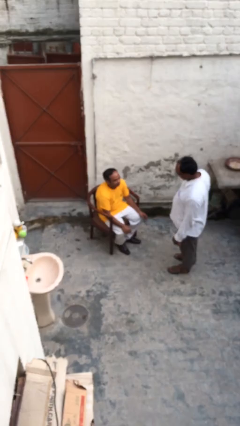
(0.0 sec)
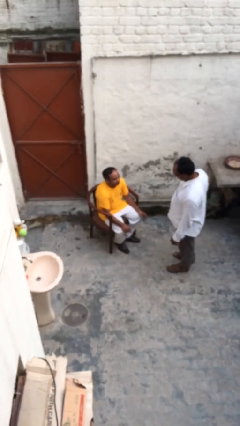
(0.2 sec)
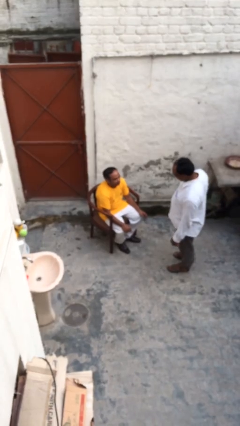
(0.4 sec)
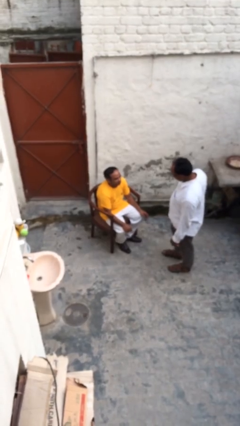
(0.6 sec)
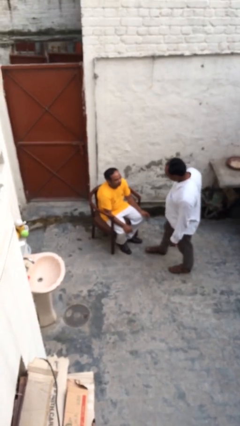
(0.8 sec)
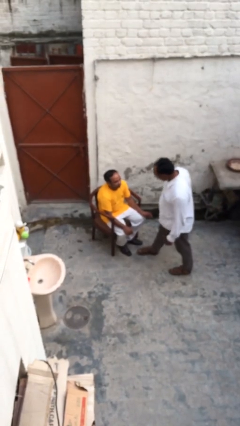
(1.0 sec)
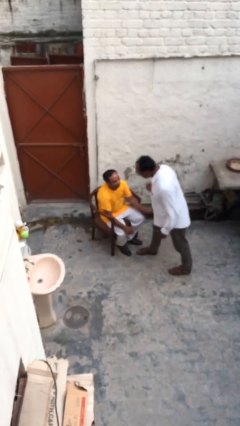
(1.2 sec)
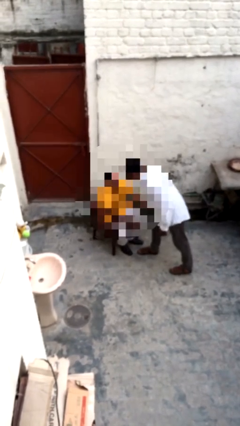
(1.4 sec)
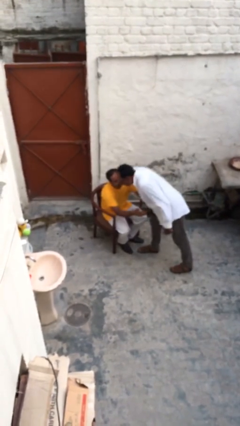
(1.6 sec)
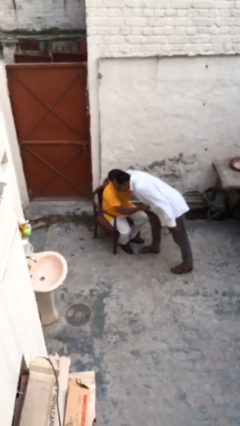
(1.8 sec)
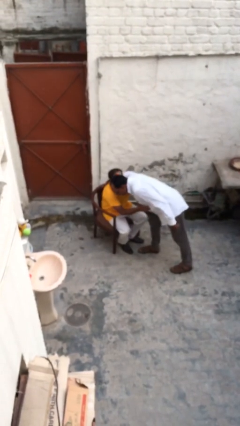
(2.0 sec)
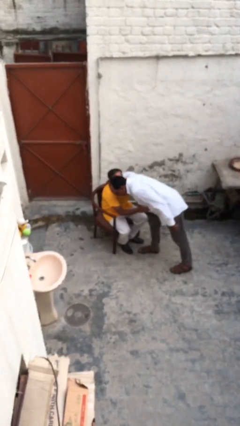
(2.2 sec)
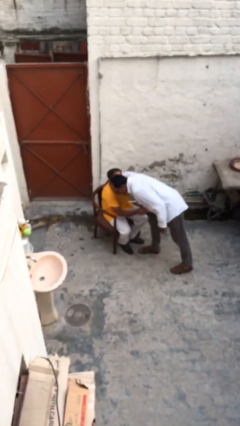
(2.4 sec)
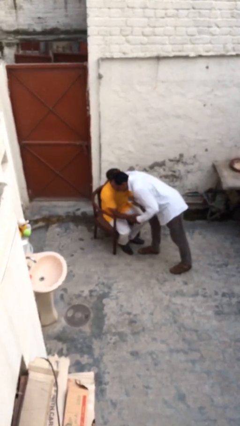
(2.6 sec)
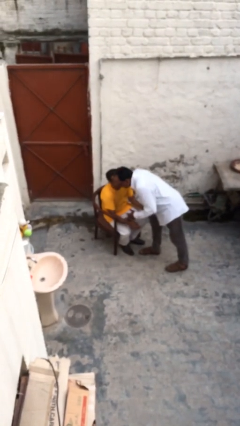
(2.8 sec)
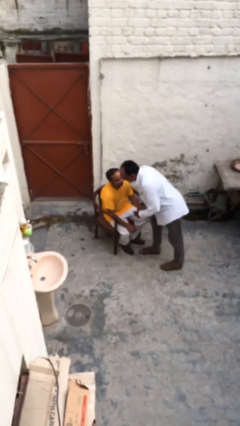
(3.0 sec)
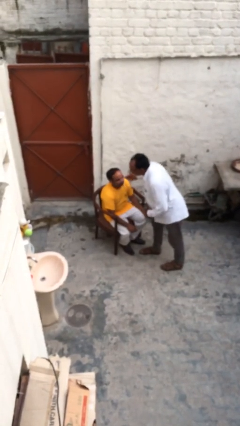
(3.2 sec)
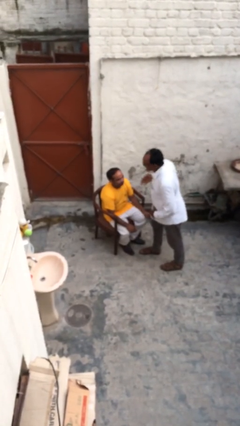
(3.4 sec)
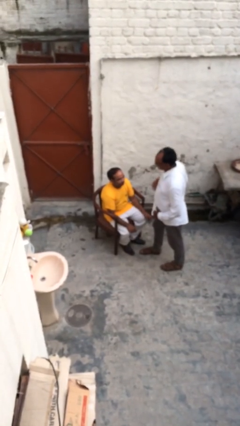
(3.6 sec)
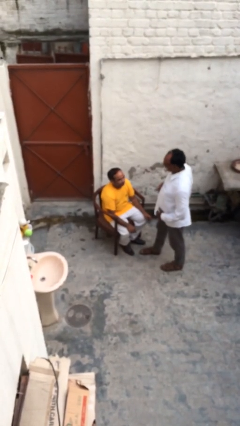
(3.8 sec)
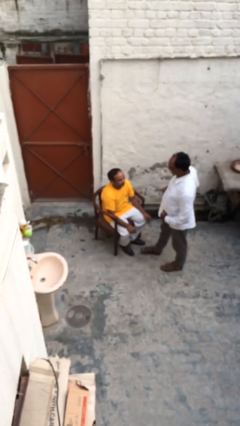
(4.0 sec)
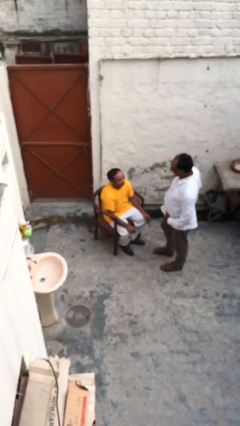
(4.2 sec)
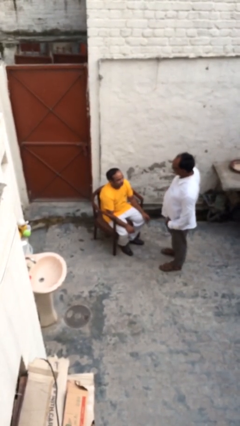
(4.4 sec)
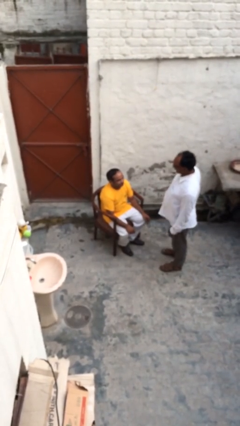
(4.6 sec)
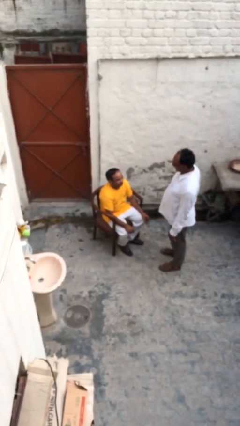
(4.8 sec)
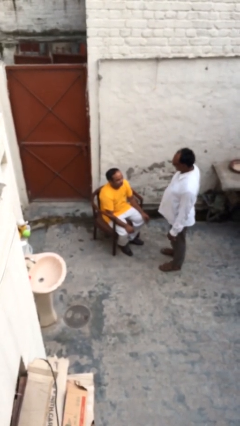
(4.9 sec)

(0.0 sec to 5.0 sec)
person embraces person

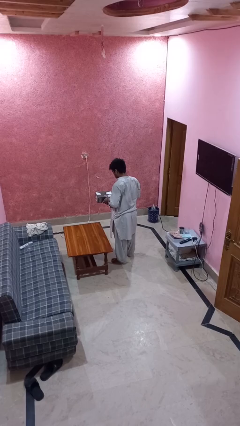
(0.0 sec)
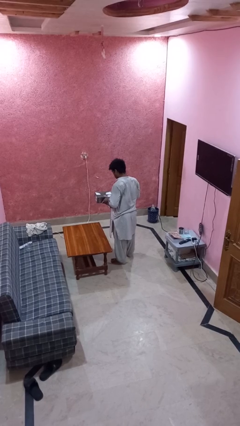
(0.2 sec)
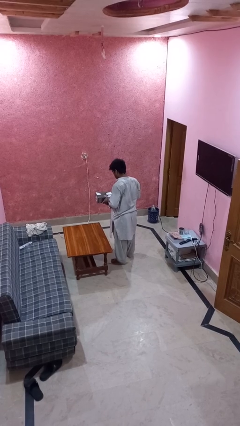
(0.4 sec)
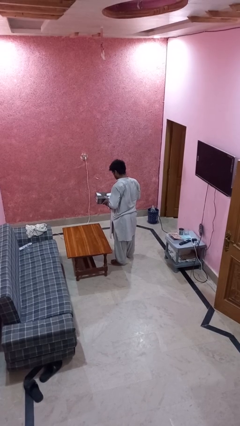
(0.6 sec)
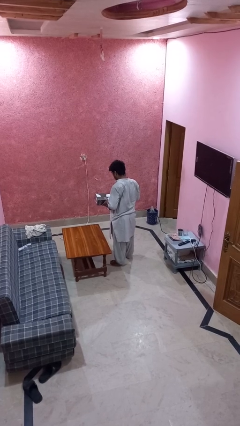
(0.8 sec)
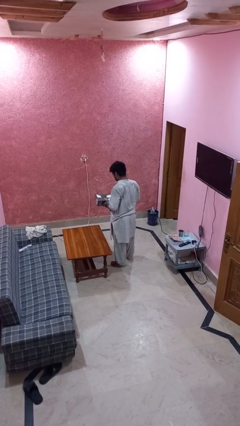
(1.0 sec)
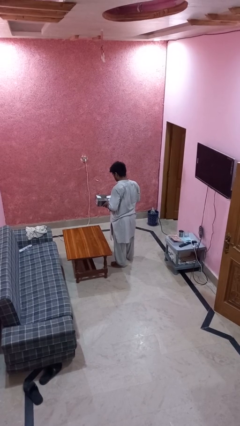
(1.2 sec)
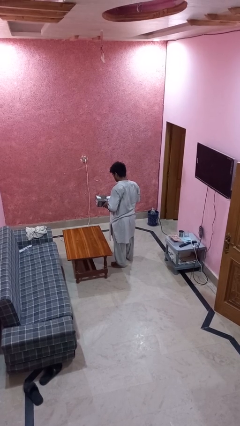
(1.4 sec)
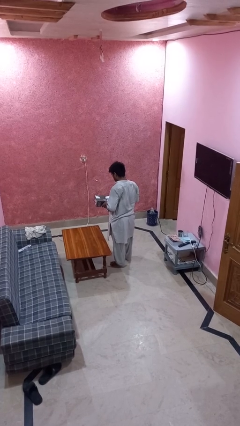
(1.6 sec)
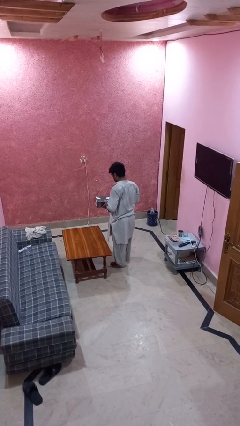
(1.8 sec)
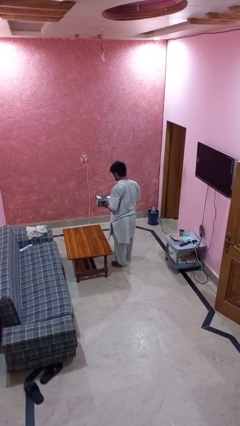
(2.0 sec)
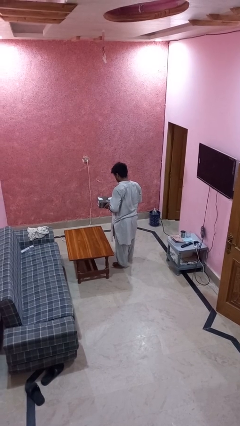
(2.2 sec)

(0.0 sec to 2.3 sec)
person throws object on table

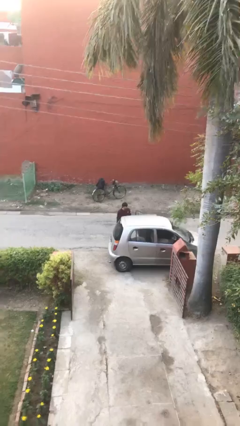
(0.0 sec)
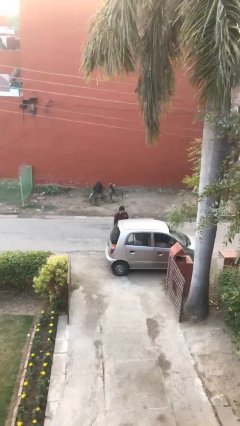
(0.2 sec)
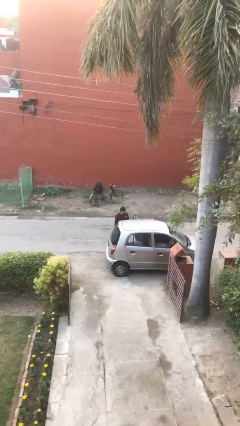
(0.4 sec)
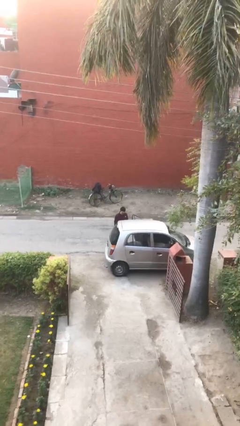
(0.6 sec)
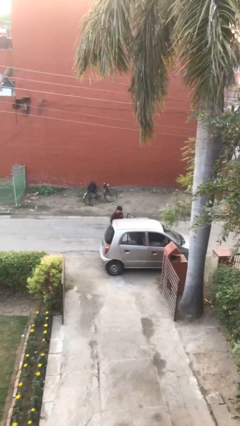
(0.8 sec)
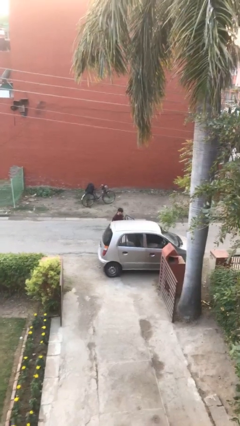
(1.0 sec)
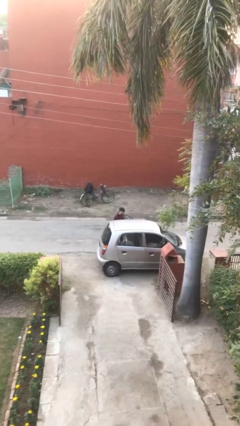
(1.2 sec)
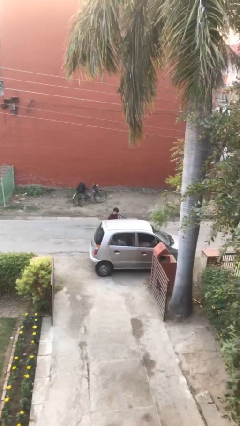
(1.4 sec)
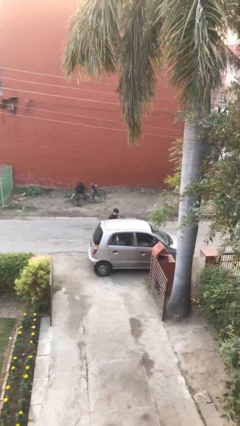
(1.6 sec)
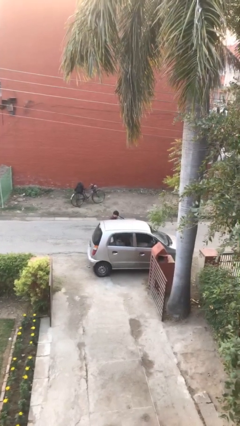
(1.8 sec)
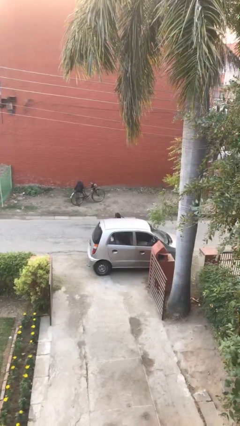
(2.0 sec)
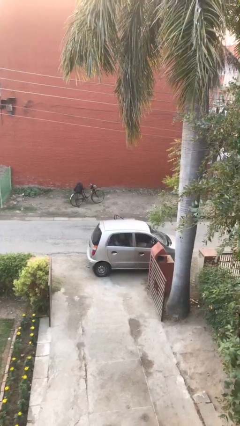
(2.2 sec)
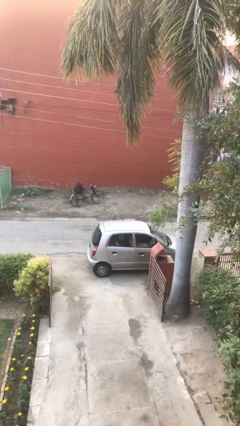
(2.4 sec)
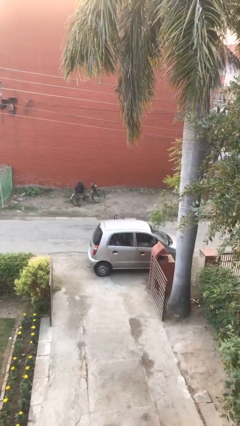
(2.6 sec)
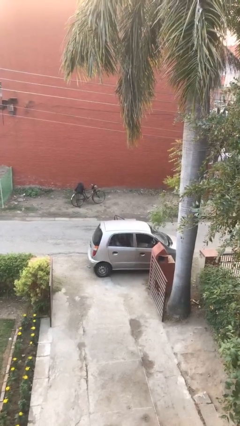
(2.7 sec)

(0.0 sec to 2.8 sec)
person enters car

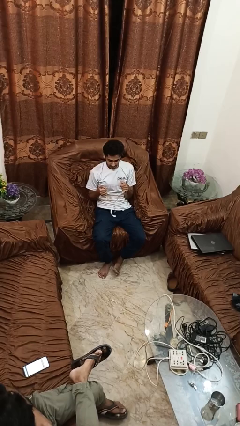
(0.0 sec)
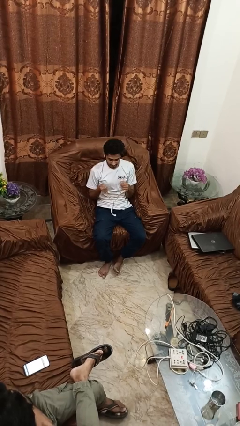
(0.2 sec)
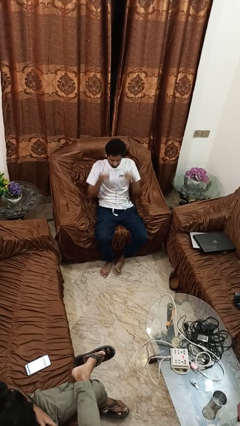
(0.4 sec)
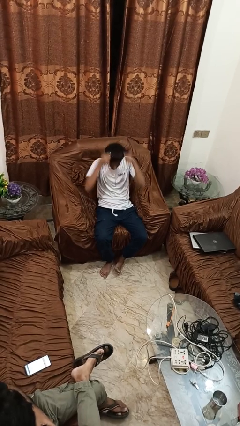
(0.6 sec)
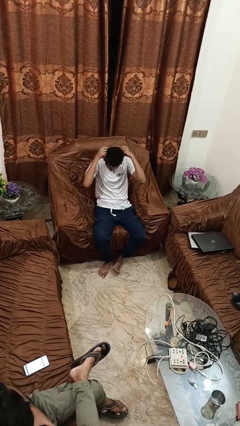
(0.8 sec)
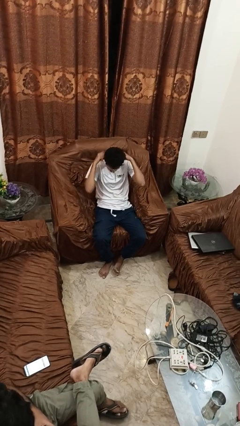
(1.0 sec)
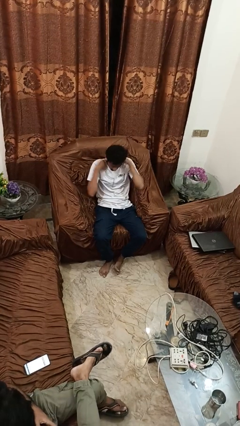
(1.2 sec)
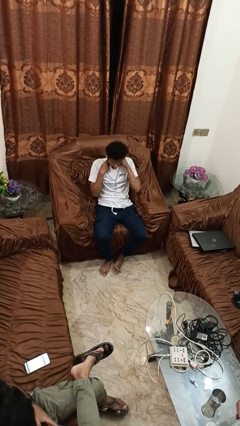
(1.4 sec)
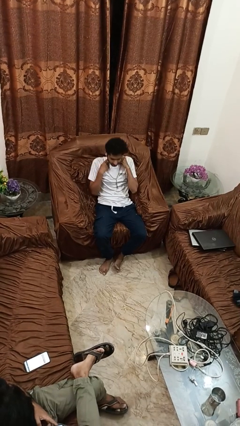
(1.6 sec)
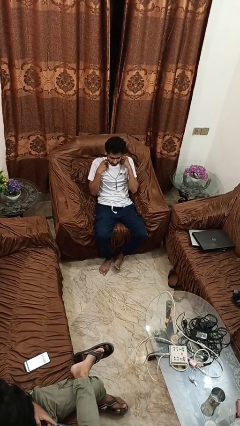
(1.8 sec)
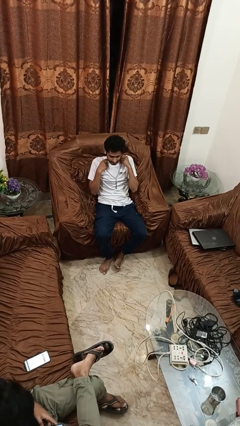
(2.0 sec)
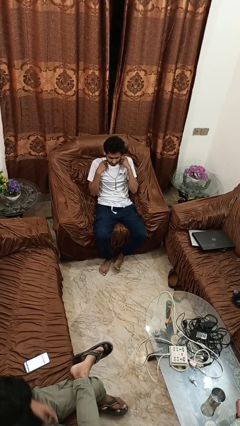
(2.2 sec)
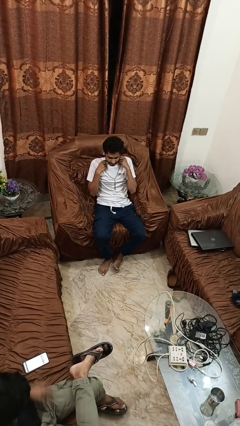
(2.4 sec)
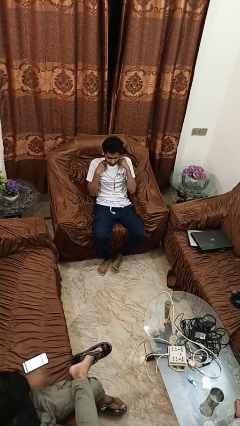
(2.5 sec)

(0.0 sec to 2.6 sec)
person puts on necklace

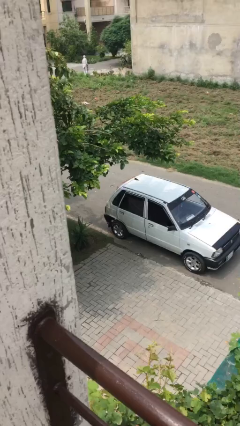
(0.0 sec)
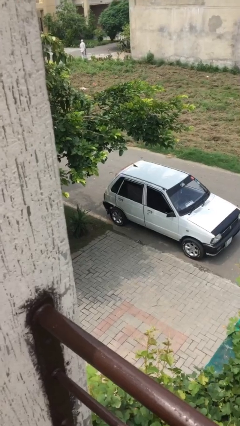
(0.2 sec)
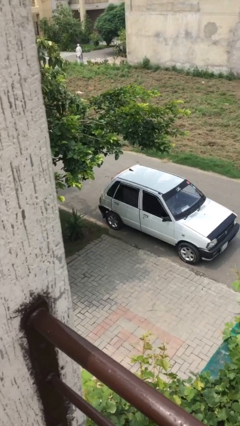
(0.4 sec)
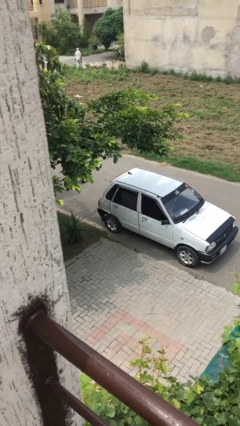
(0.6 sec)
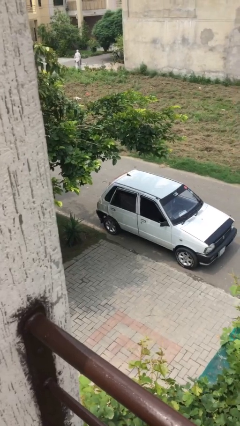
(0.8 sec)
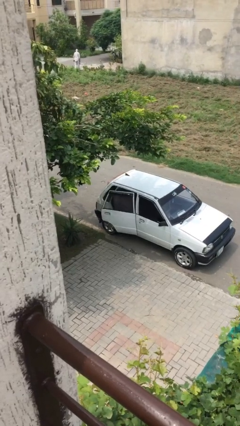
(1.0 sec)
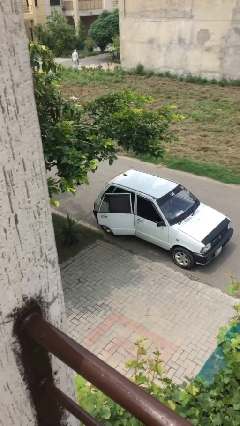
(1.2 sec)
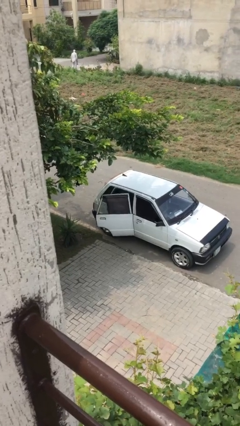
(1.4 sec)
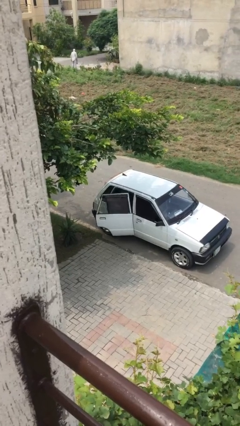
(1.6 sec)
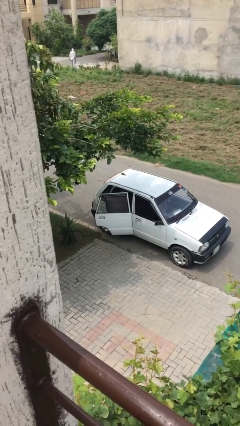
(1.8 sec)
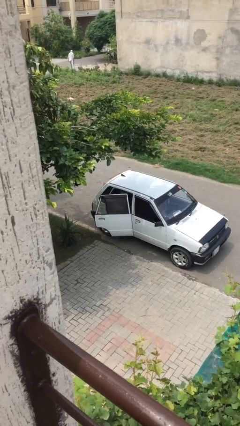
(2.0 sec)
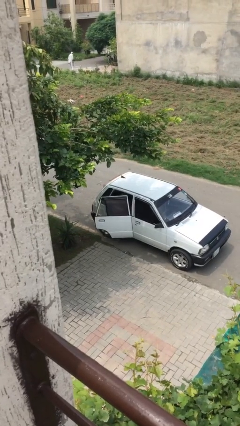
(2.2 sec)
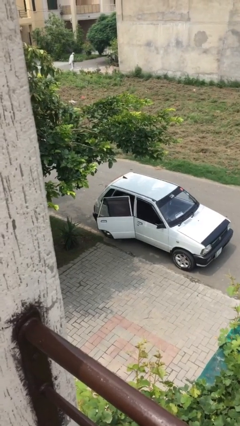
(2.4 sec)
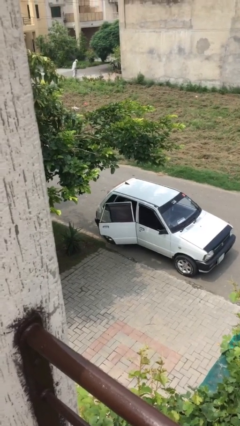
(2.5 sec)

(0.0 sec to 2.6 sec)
person opens car door

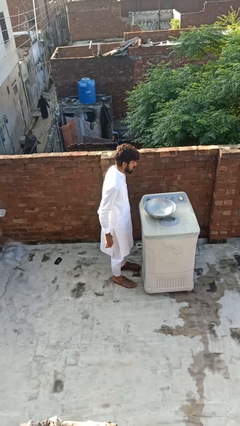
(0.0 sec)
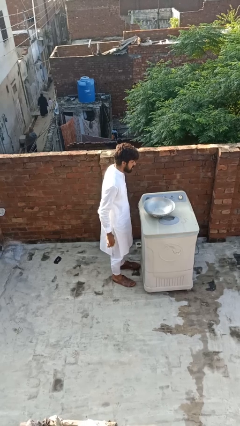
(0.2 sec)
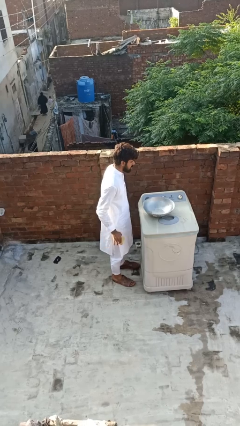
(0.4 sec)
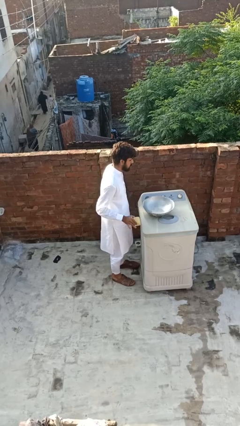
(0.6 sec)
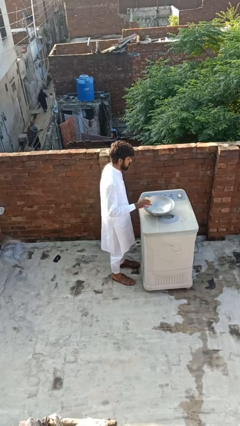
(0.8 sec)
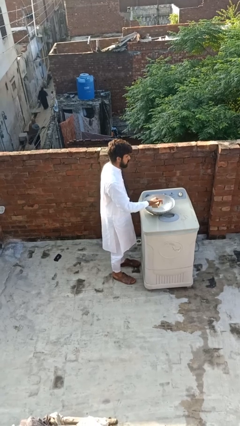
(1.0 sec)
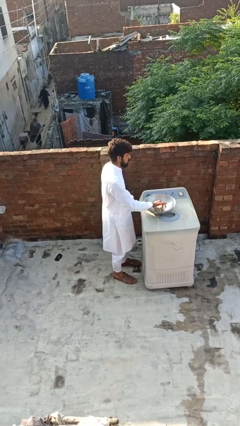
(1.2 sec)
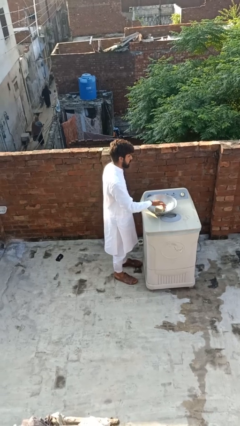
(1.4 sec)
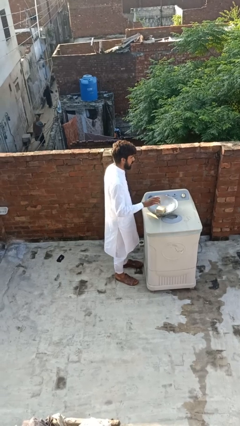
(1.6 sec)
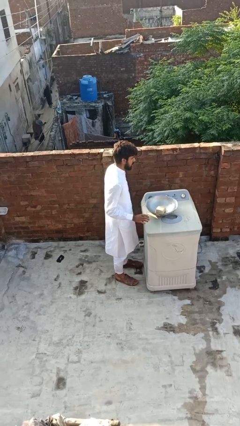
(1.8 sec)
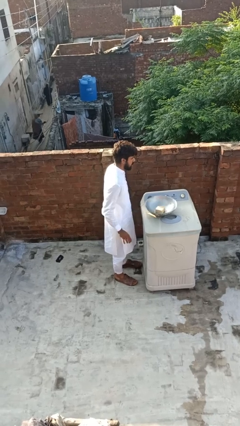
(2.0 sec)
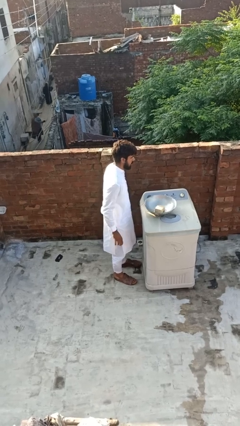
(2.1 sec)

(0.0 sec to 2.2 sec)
person pours into bowl
